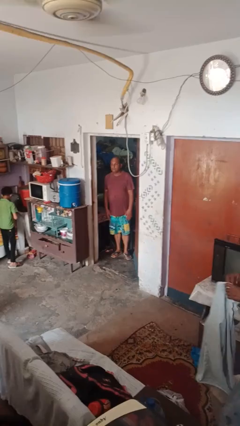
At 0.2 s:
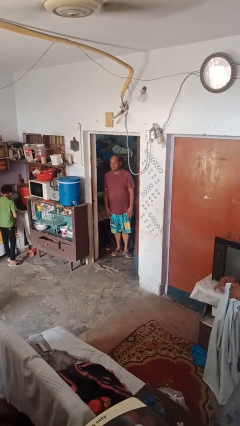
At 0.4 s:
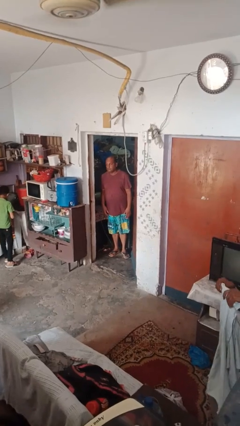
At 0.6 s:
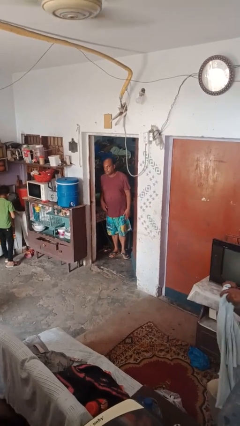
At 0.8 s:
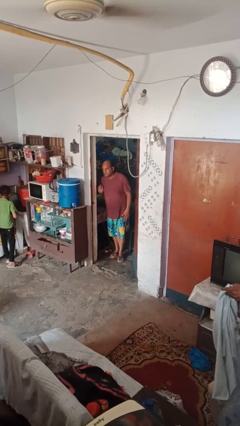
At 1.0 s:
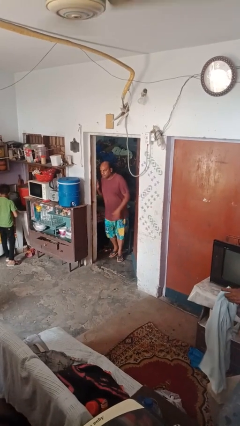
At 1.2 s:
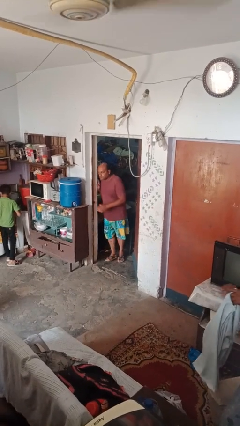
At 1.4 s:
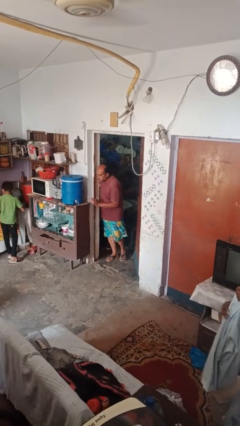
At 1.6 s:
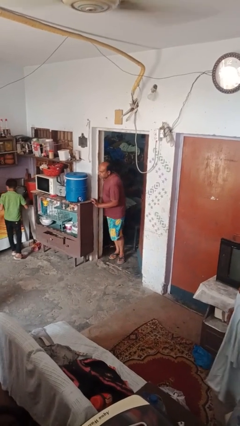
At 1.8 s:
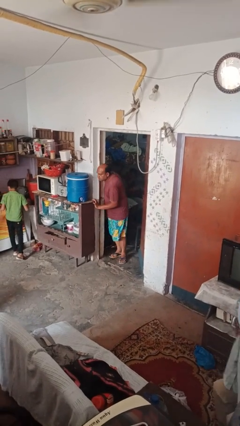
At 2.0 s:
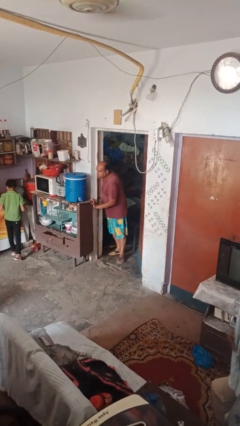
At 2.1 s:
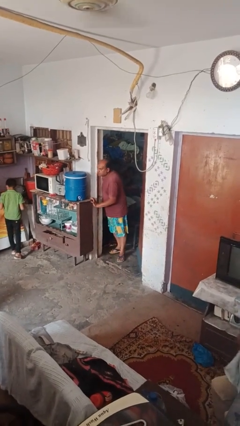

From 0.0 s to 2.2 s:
person bumps into wall

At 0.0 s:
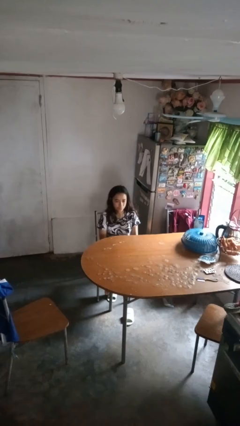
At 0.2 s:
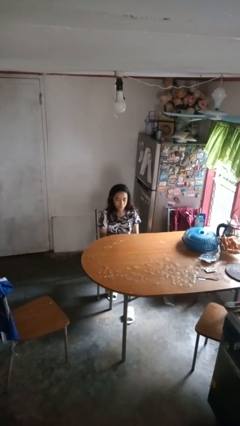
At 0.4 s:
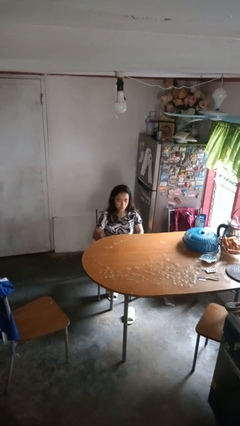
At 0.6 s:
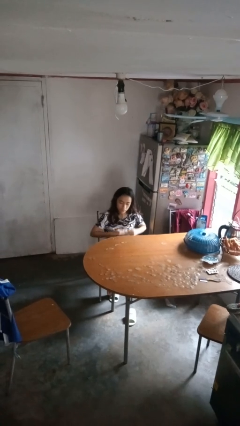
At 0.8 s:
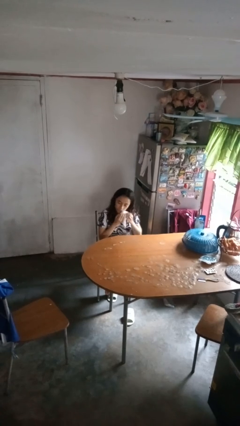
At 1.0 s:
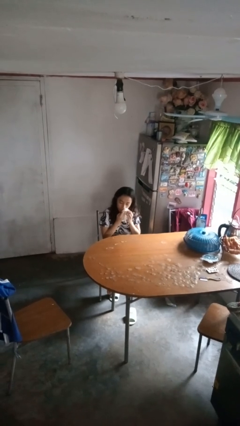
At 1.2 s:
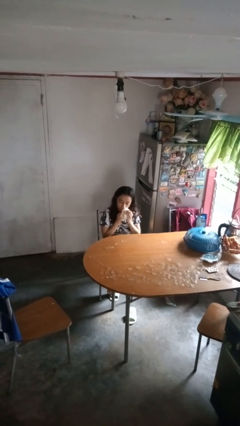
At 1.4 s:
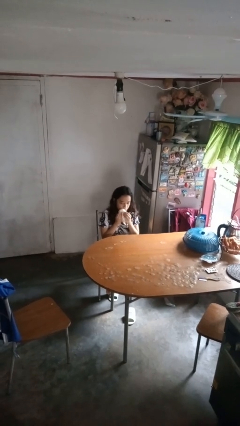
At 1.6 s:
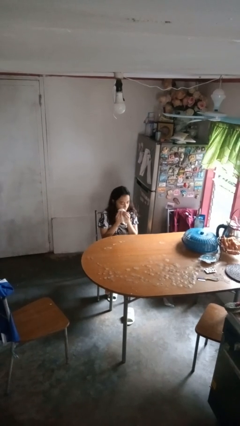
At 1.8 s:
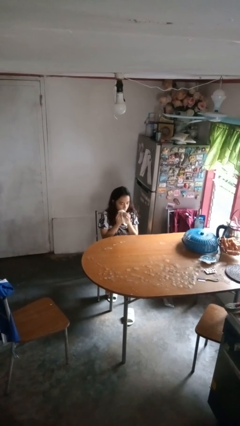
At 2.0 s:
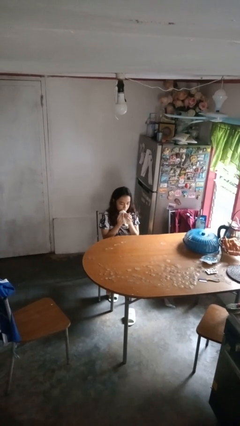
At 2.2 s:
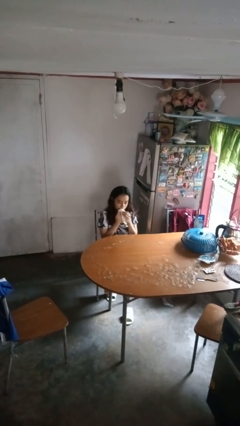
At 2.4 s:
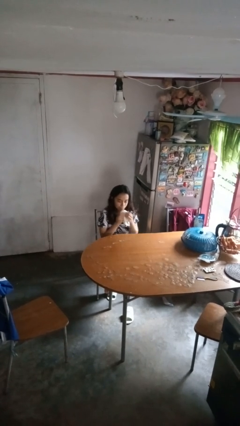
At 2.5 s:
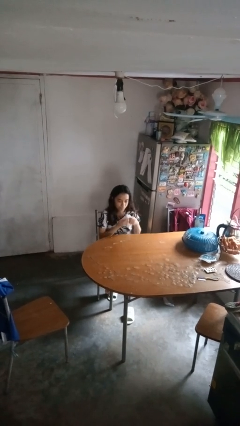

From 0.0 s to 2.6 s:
person wipes mouth with napkin

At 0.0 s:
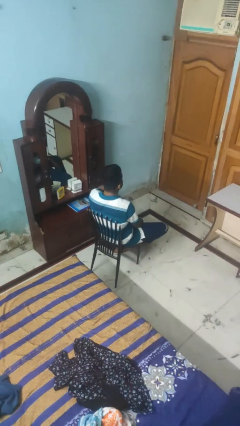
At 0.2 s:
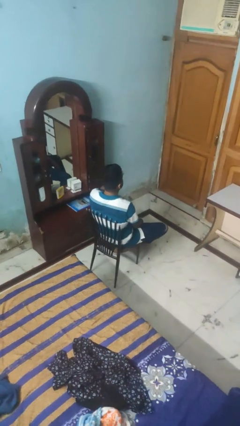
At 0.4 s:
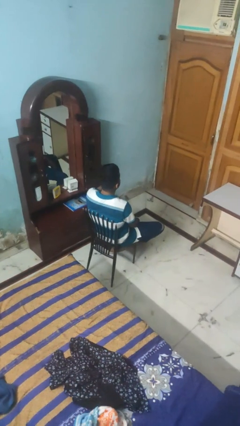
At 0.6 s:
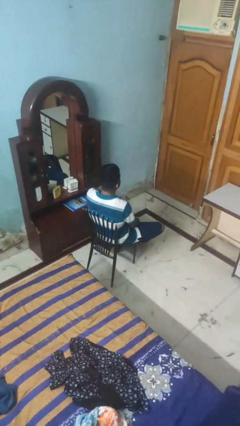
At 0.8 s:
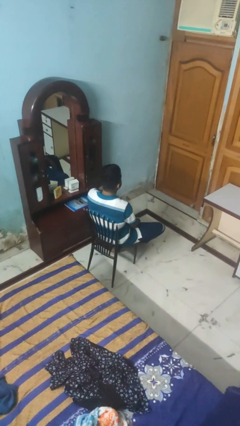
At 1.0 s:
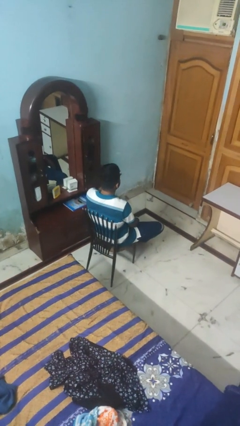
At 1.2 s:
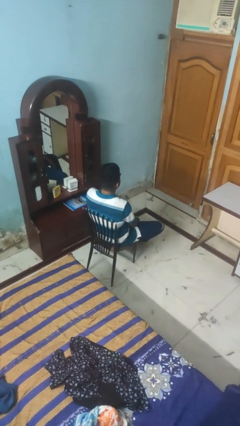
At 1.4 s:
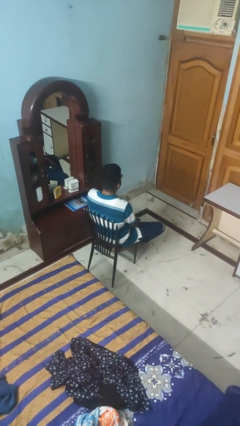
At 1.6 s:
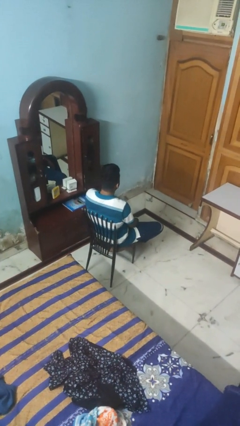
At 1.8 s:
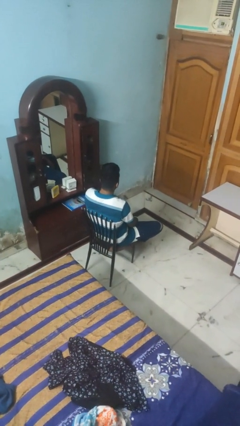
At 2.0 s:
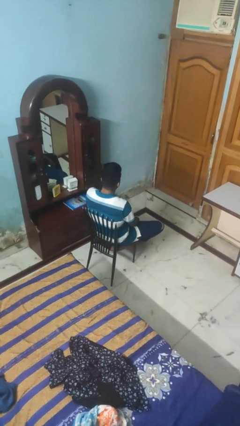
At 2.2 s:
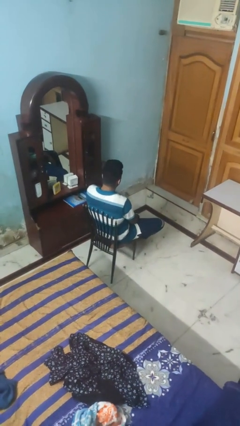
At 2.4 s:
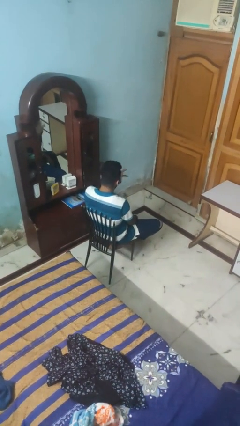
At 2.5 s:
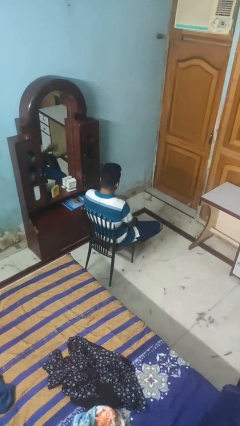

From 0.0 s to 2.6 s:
person rubs eyes

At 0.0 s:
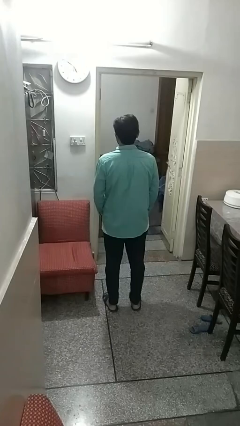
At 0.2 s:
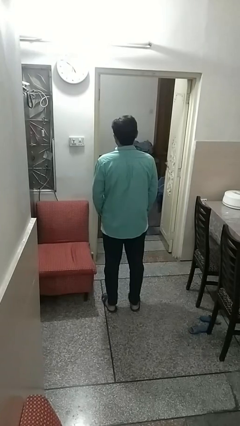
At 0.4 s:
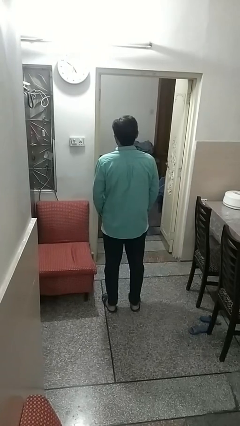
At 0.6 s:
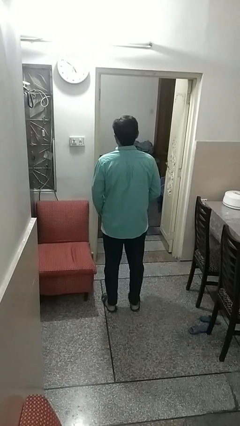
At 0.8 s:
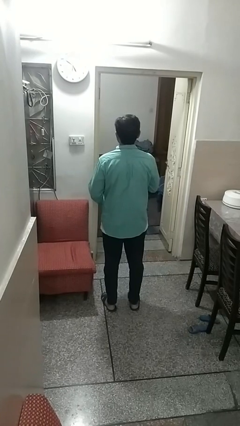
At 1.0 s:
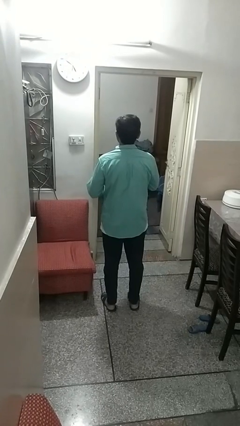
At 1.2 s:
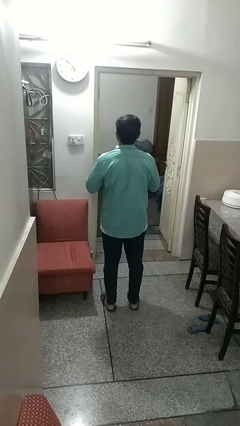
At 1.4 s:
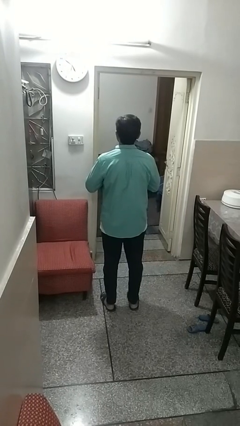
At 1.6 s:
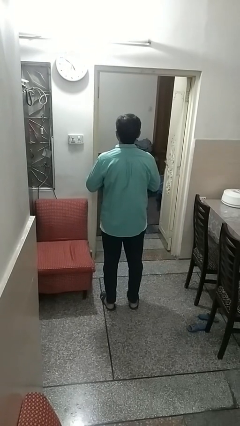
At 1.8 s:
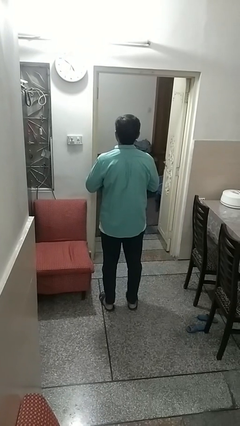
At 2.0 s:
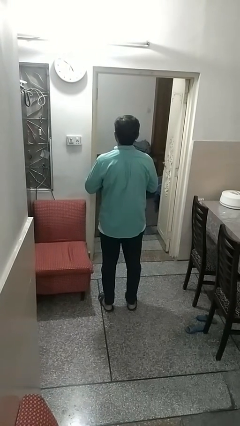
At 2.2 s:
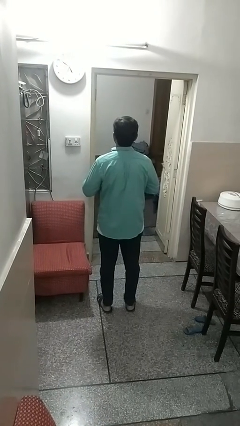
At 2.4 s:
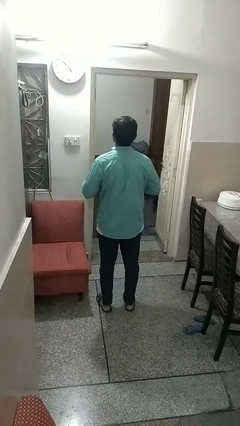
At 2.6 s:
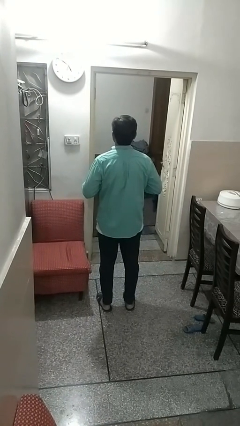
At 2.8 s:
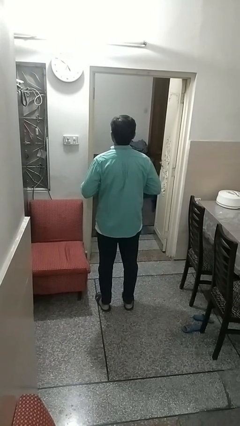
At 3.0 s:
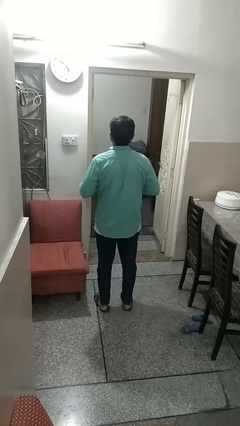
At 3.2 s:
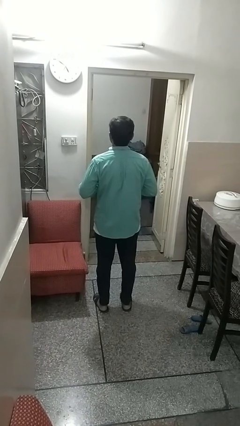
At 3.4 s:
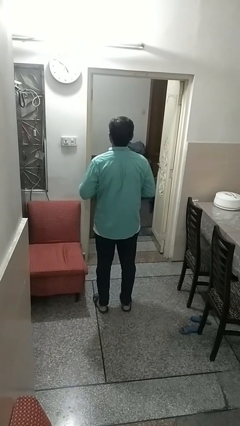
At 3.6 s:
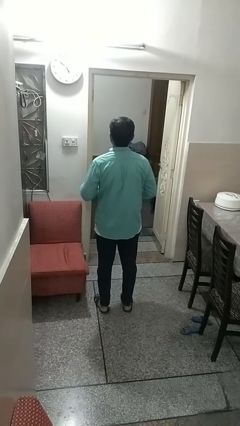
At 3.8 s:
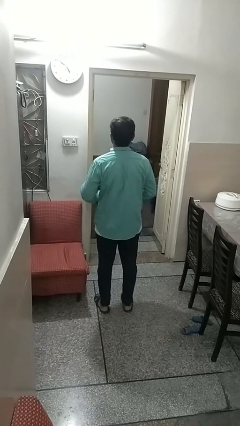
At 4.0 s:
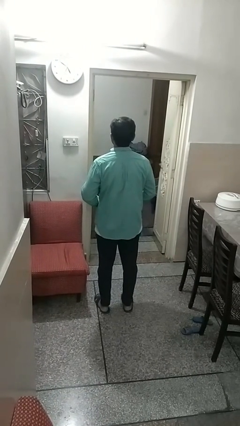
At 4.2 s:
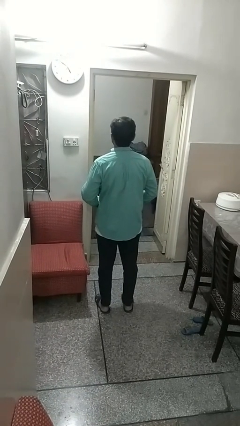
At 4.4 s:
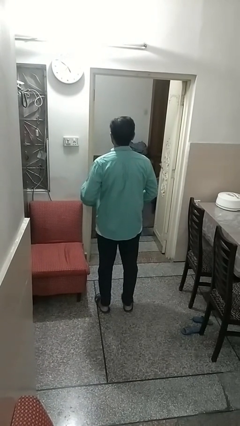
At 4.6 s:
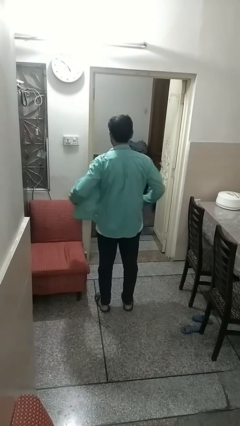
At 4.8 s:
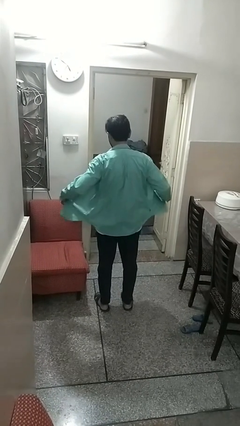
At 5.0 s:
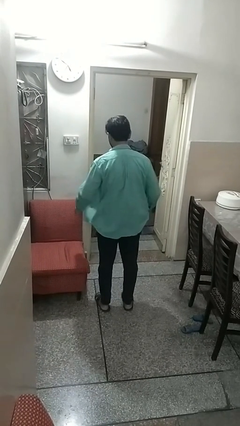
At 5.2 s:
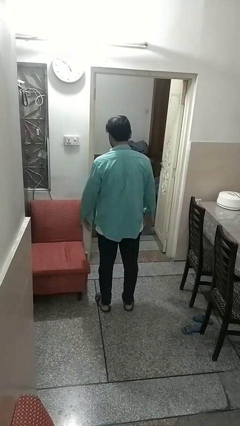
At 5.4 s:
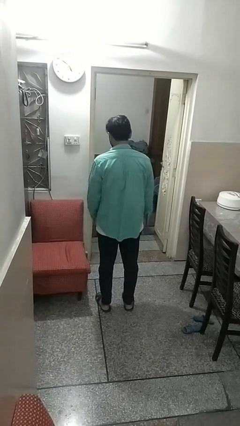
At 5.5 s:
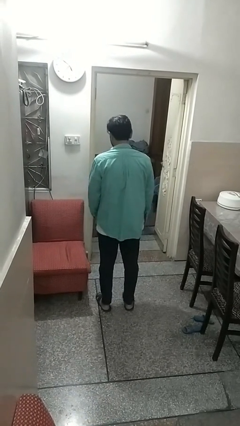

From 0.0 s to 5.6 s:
person unbuttons shirt

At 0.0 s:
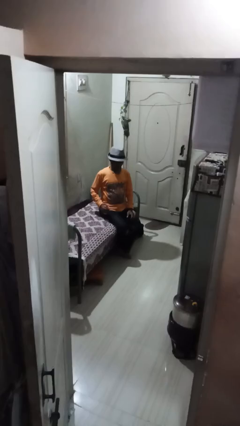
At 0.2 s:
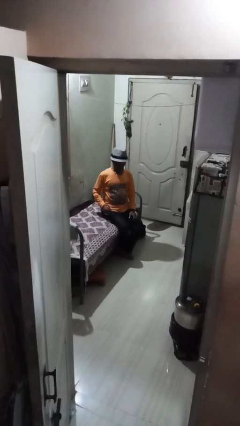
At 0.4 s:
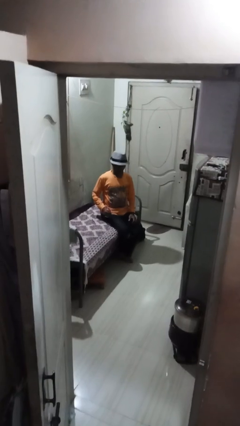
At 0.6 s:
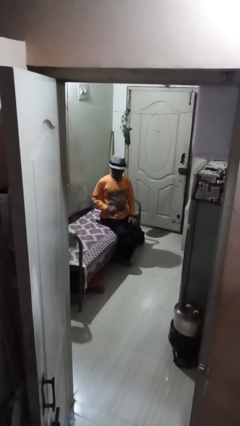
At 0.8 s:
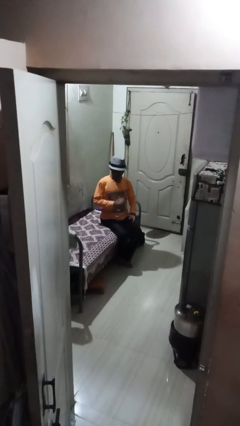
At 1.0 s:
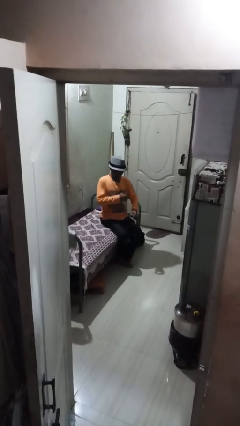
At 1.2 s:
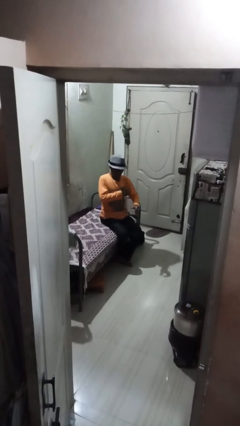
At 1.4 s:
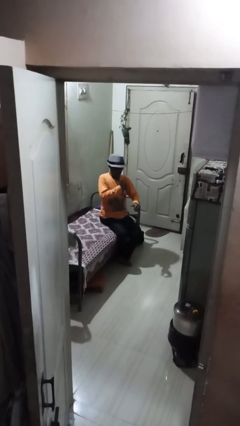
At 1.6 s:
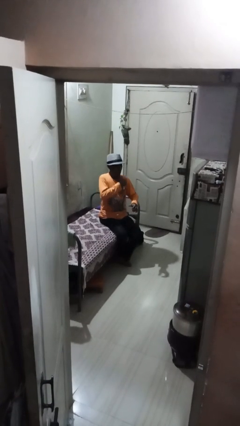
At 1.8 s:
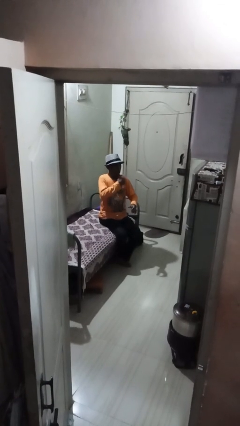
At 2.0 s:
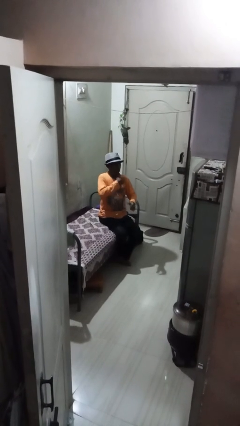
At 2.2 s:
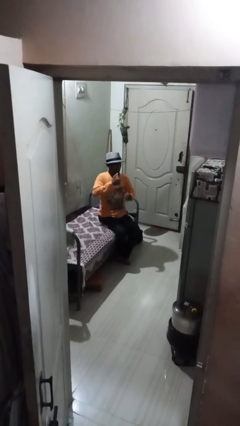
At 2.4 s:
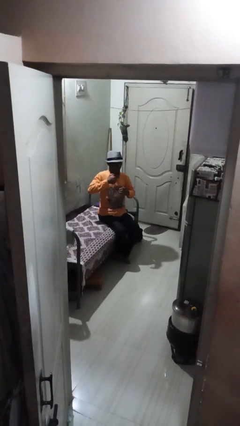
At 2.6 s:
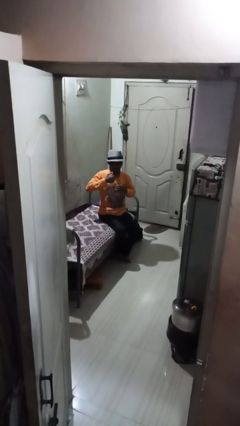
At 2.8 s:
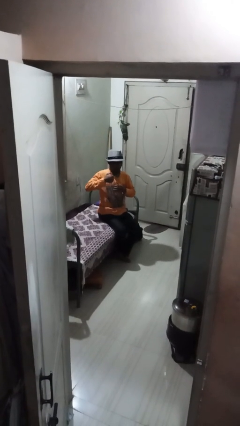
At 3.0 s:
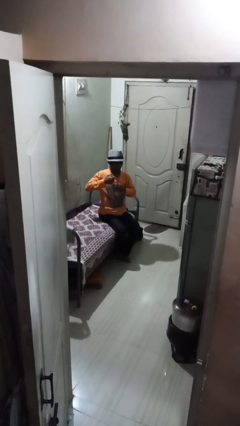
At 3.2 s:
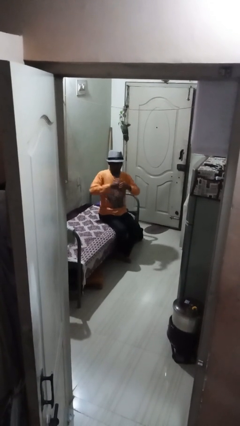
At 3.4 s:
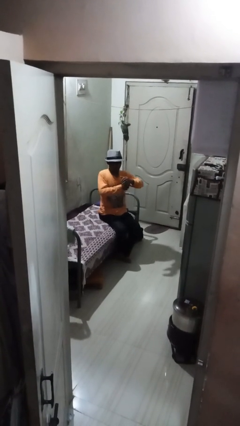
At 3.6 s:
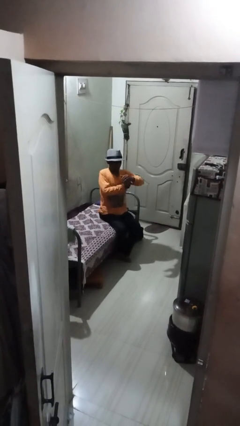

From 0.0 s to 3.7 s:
person applies deodorant

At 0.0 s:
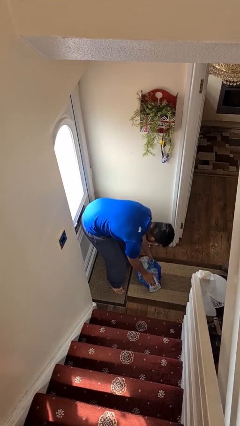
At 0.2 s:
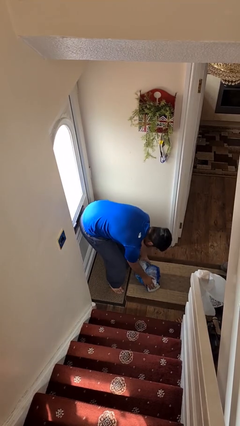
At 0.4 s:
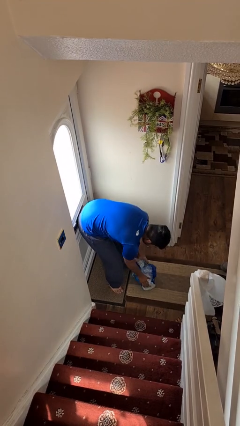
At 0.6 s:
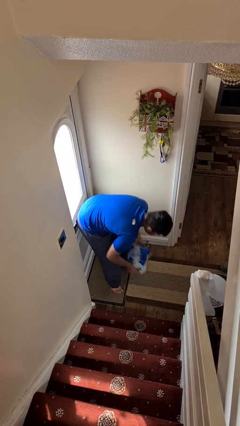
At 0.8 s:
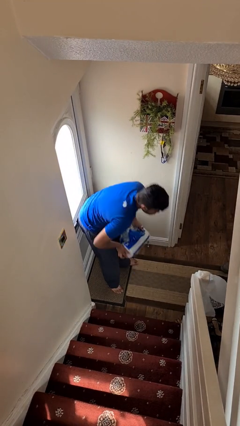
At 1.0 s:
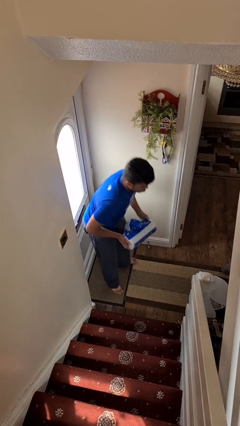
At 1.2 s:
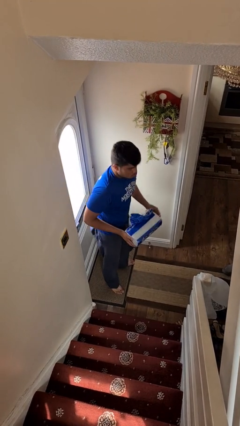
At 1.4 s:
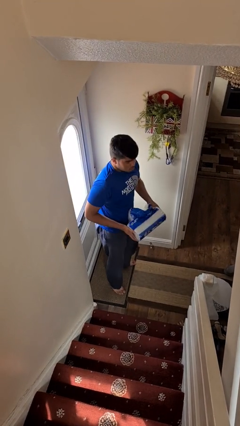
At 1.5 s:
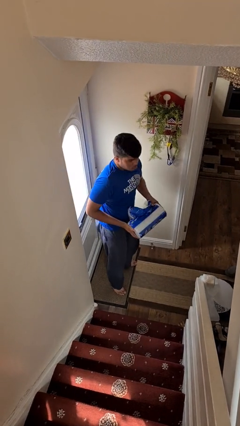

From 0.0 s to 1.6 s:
person picks up object from floor
